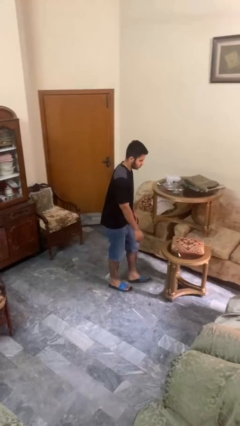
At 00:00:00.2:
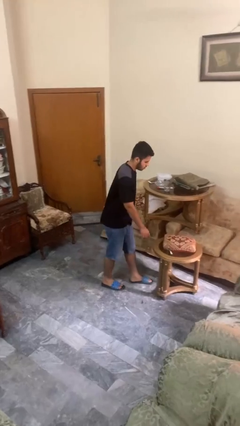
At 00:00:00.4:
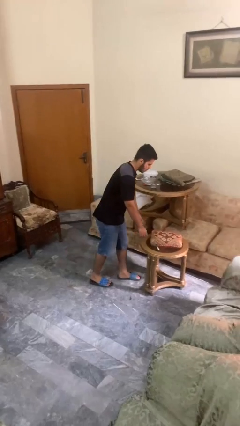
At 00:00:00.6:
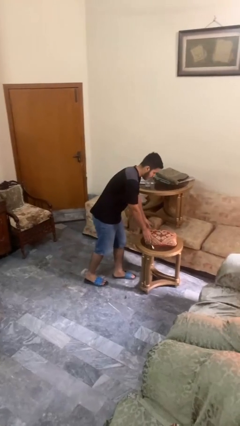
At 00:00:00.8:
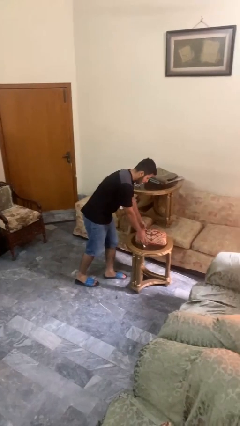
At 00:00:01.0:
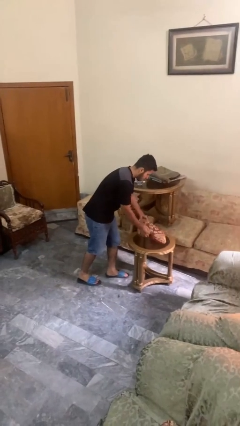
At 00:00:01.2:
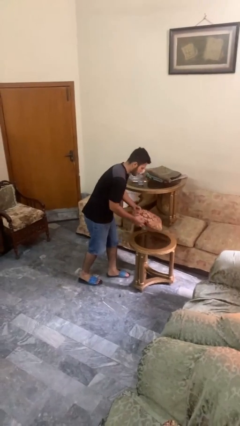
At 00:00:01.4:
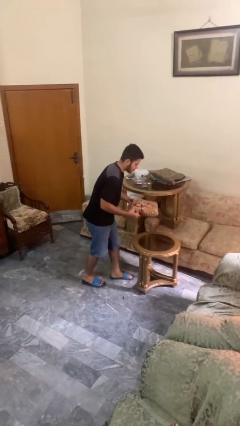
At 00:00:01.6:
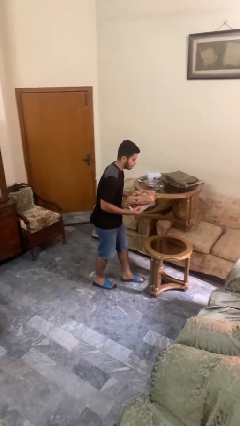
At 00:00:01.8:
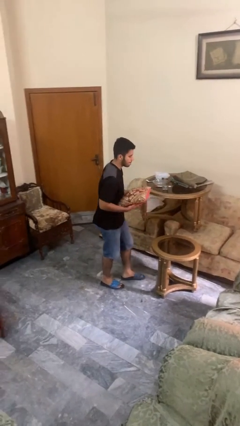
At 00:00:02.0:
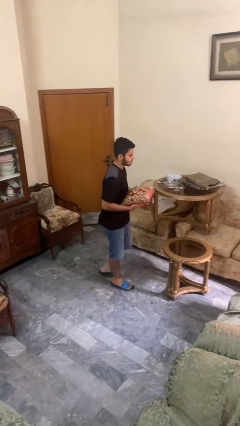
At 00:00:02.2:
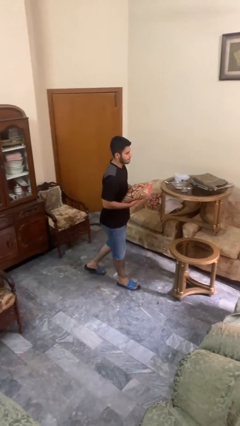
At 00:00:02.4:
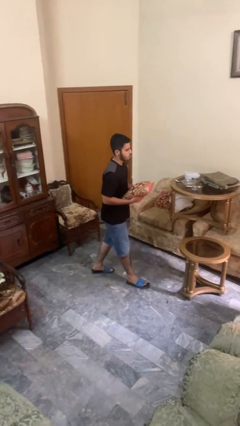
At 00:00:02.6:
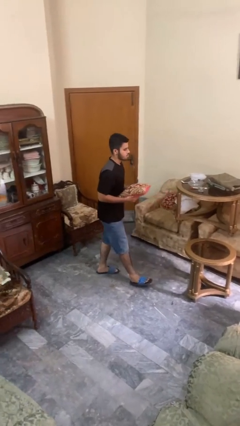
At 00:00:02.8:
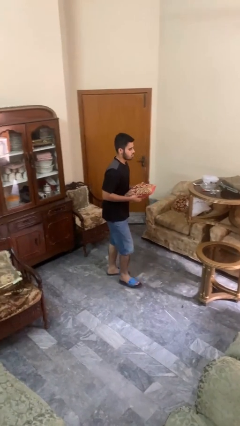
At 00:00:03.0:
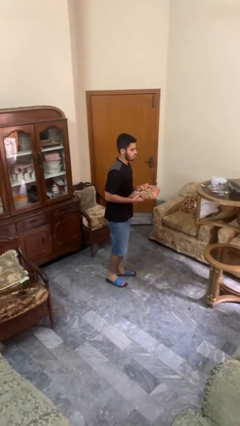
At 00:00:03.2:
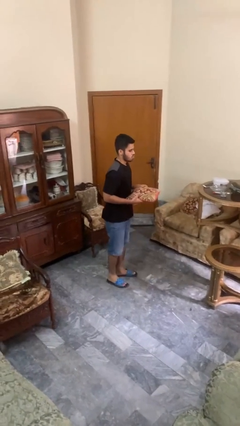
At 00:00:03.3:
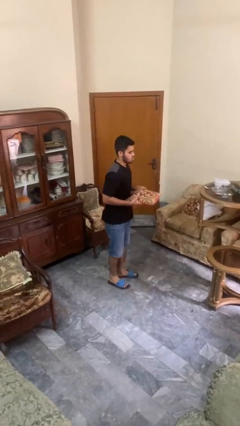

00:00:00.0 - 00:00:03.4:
person picks up object from table

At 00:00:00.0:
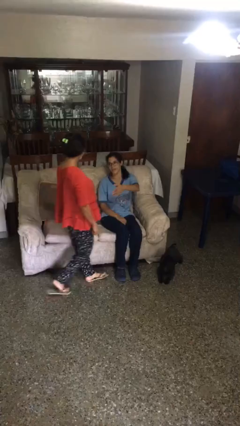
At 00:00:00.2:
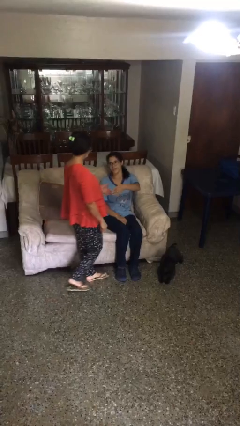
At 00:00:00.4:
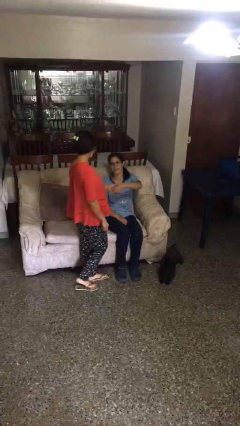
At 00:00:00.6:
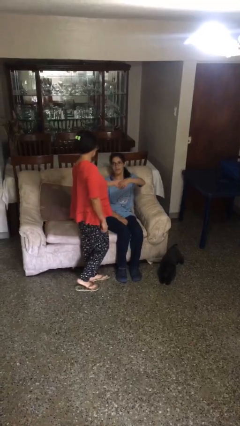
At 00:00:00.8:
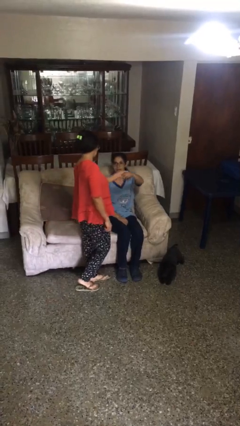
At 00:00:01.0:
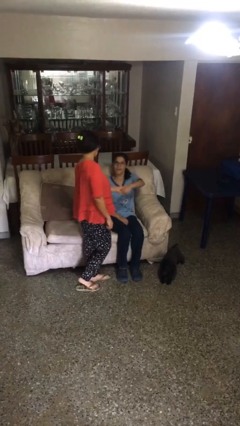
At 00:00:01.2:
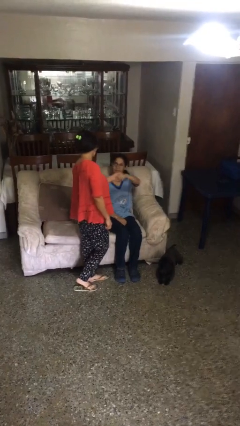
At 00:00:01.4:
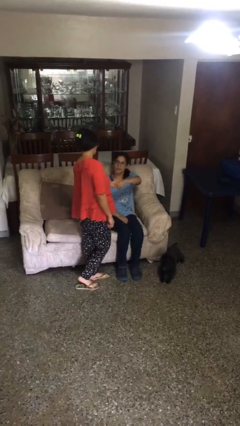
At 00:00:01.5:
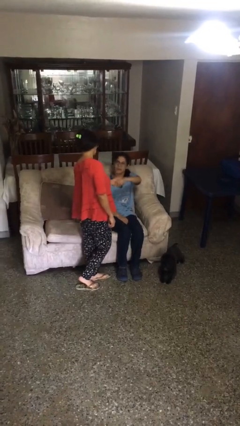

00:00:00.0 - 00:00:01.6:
person shakes hand

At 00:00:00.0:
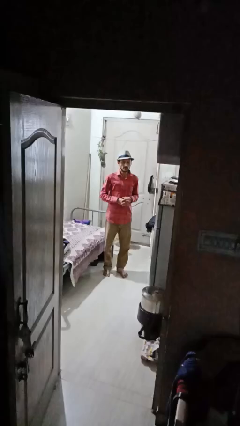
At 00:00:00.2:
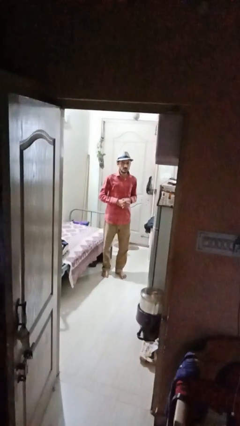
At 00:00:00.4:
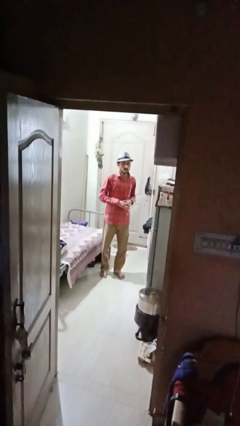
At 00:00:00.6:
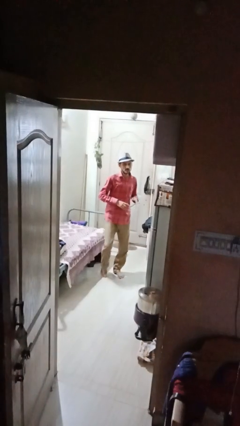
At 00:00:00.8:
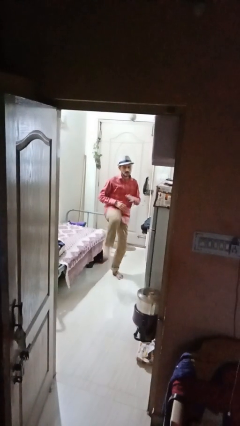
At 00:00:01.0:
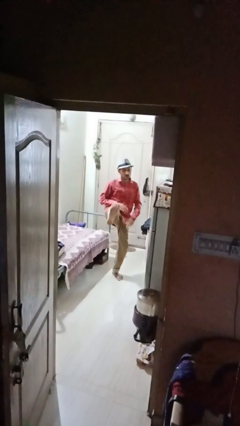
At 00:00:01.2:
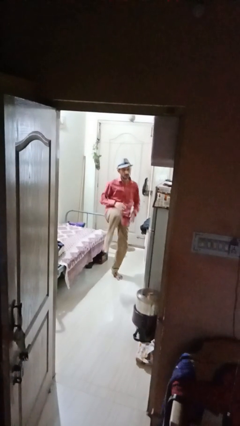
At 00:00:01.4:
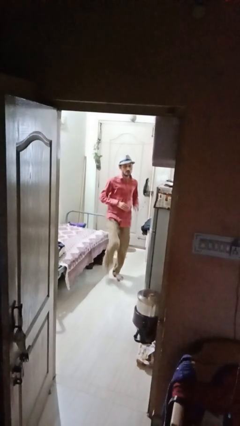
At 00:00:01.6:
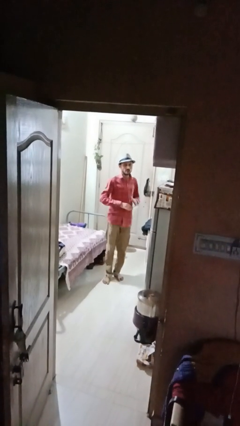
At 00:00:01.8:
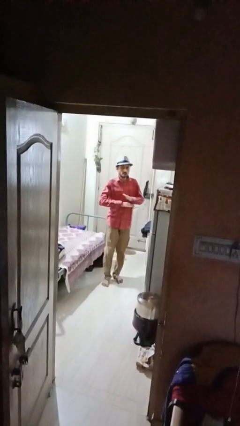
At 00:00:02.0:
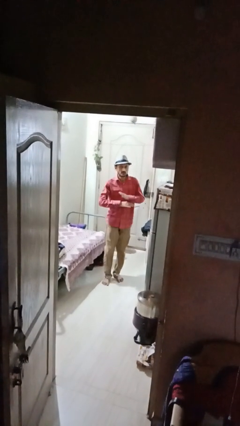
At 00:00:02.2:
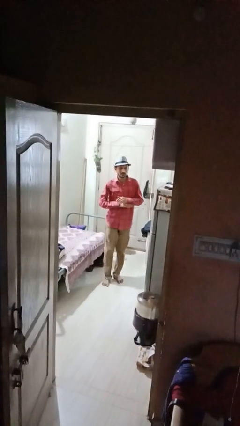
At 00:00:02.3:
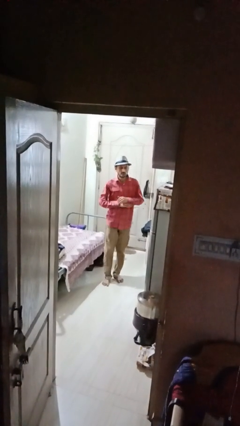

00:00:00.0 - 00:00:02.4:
person karate kicks

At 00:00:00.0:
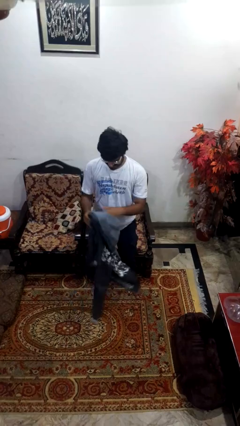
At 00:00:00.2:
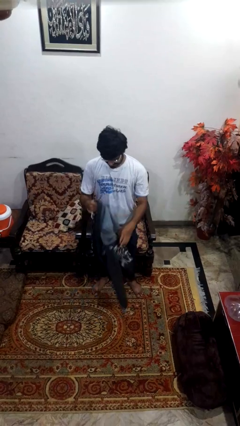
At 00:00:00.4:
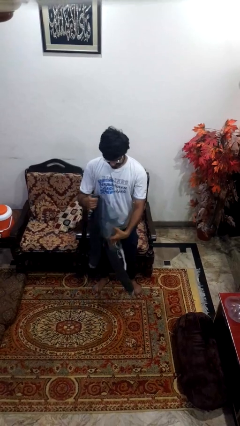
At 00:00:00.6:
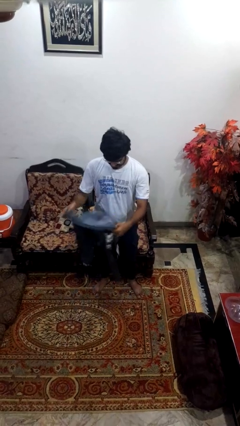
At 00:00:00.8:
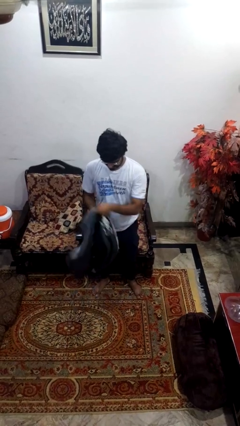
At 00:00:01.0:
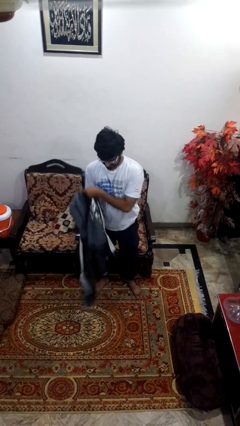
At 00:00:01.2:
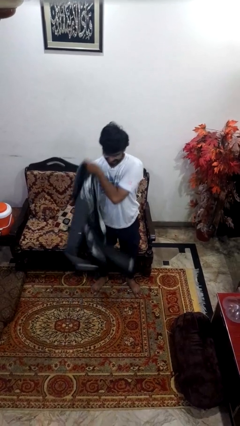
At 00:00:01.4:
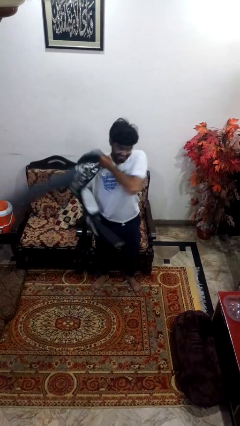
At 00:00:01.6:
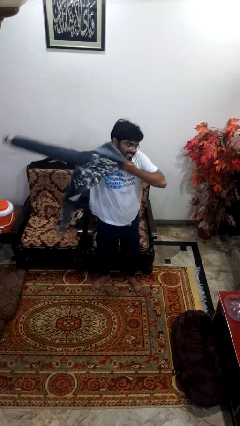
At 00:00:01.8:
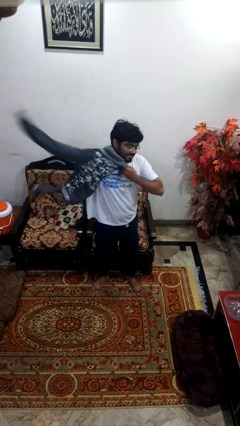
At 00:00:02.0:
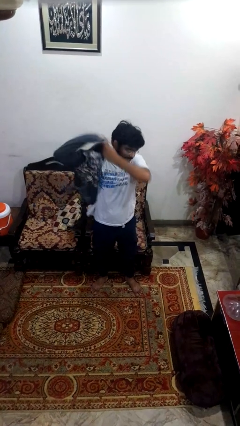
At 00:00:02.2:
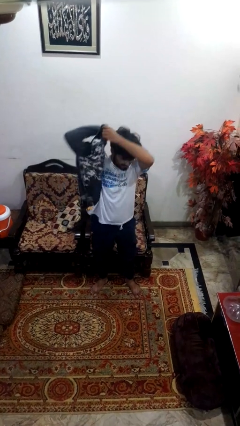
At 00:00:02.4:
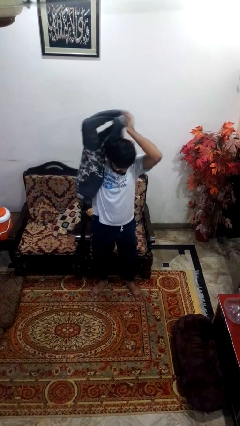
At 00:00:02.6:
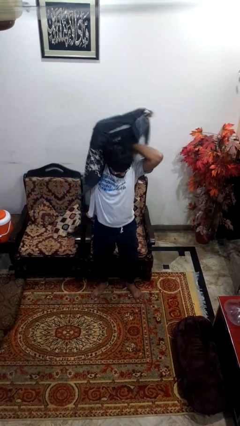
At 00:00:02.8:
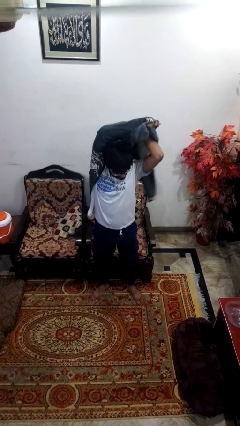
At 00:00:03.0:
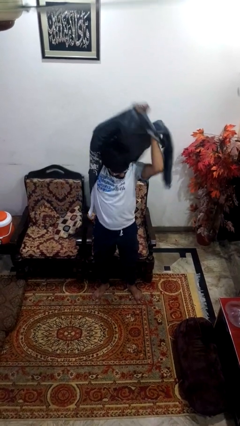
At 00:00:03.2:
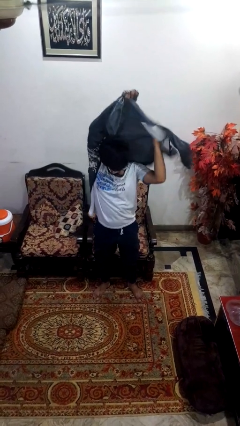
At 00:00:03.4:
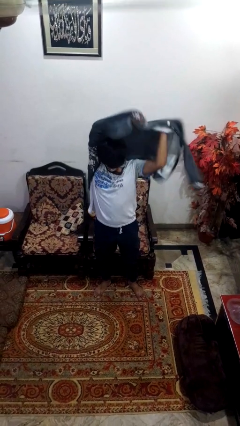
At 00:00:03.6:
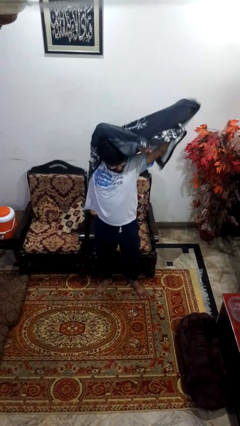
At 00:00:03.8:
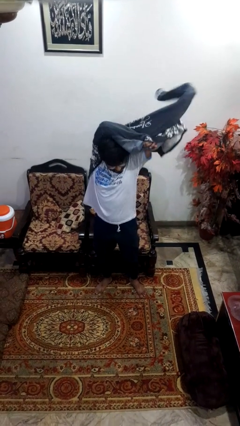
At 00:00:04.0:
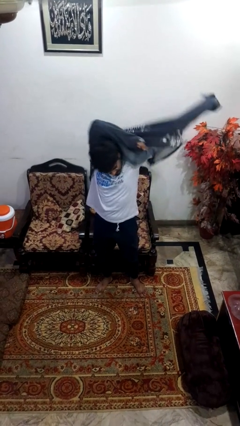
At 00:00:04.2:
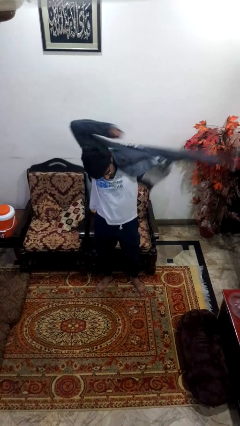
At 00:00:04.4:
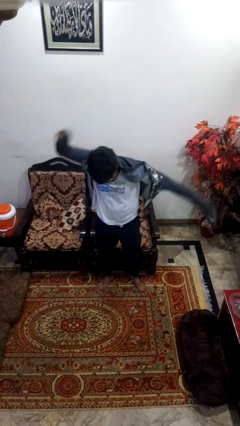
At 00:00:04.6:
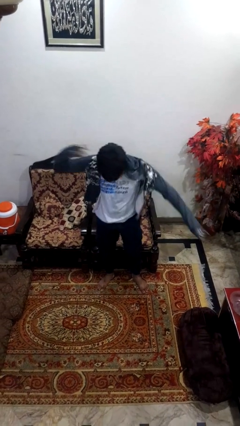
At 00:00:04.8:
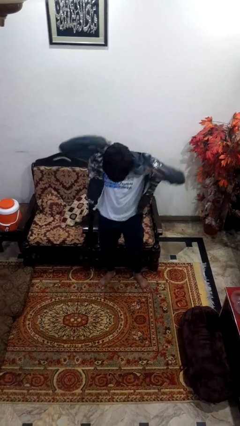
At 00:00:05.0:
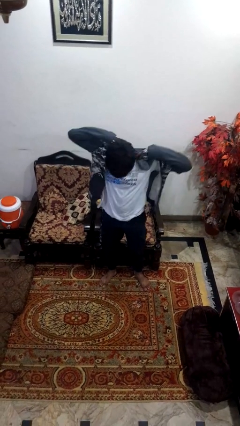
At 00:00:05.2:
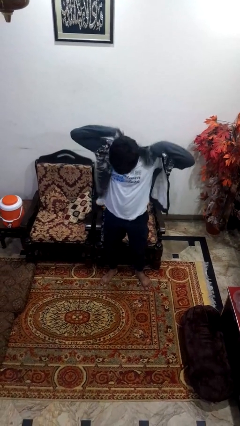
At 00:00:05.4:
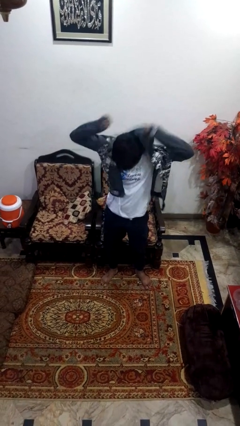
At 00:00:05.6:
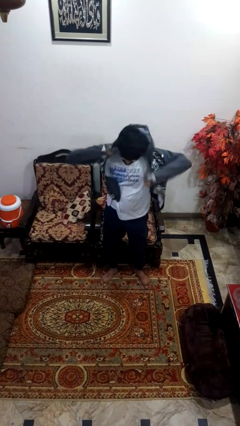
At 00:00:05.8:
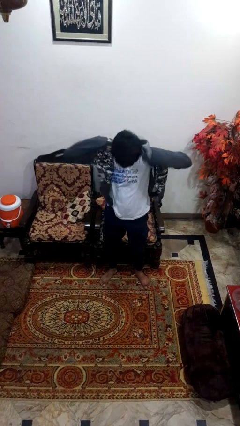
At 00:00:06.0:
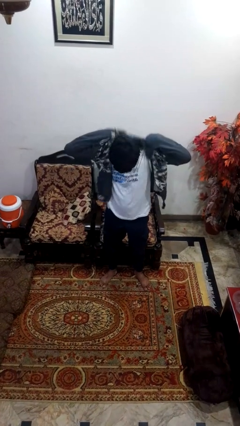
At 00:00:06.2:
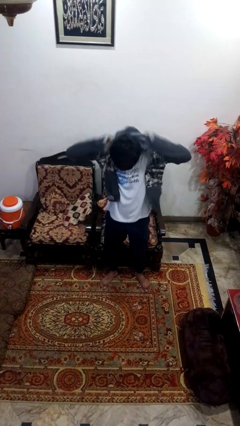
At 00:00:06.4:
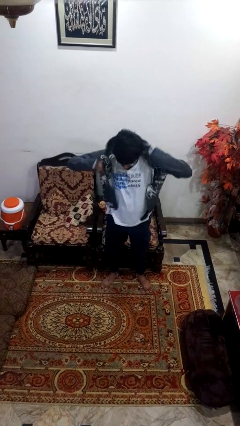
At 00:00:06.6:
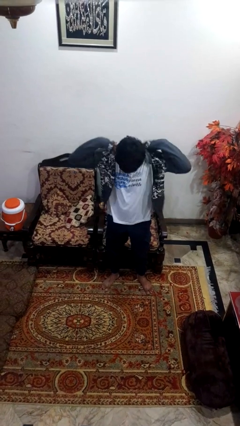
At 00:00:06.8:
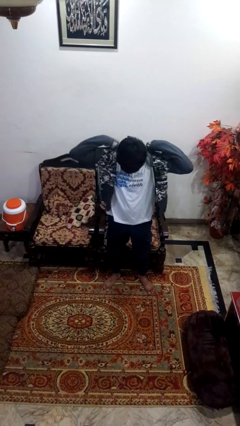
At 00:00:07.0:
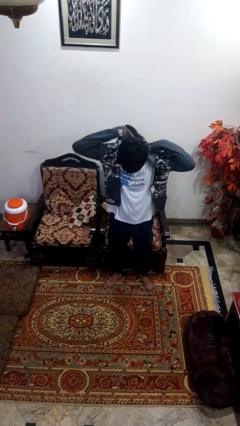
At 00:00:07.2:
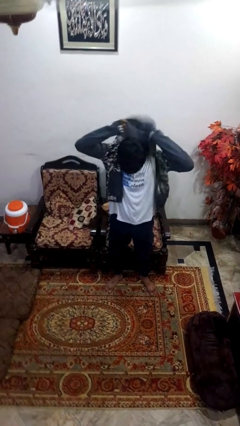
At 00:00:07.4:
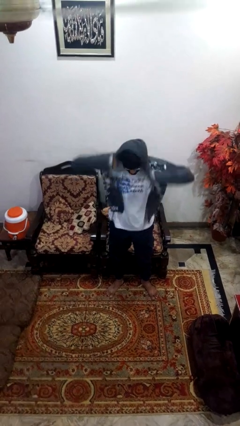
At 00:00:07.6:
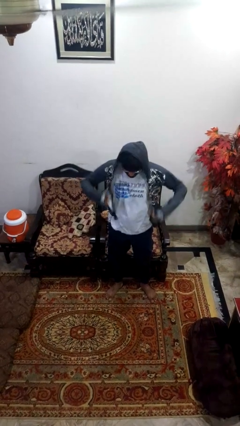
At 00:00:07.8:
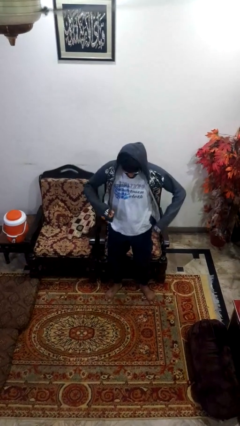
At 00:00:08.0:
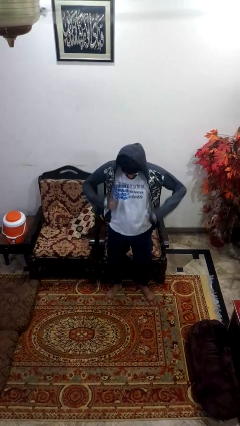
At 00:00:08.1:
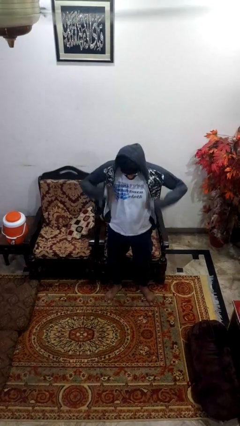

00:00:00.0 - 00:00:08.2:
person puts on hoodie

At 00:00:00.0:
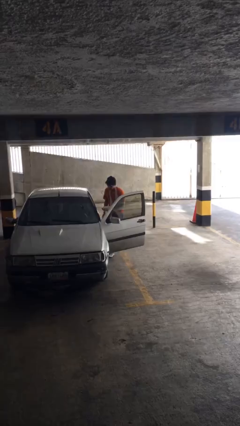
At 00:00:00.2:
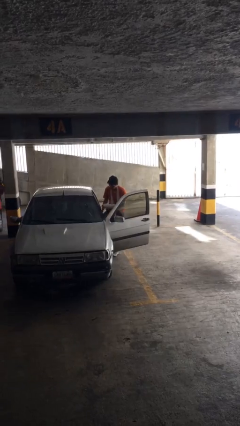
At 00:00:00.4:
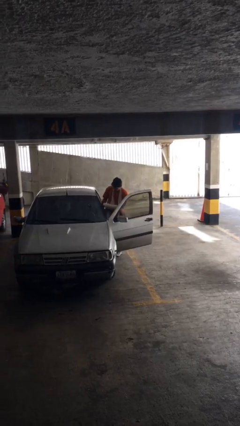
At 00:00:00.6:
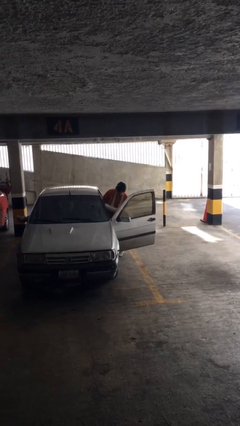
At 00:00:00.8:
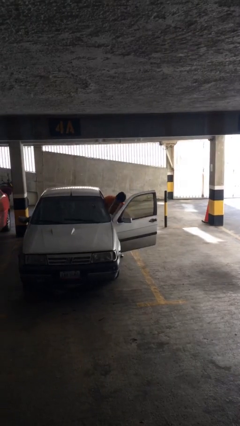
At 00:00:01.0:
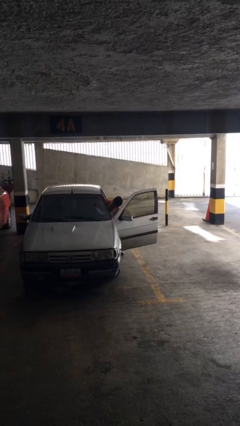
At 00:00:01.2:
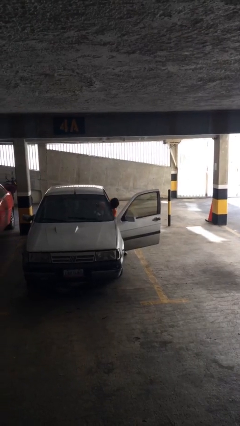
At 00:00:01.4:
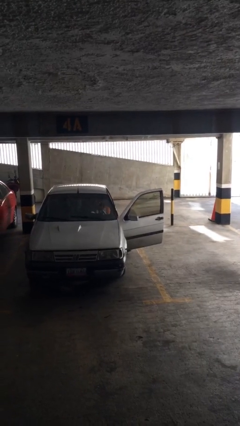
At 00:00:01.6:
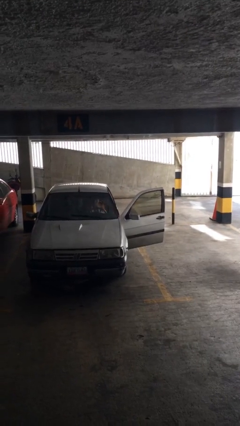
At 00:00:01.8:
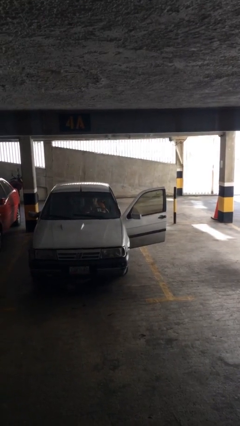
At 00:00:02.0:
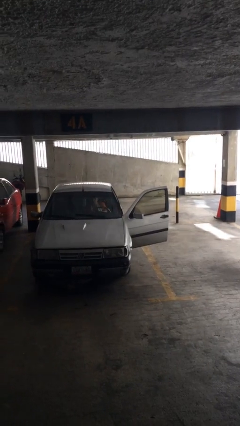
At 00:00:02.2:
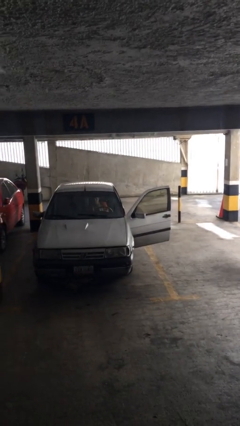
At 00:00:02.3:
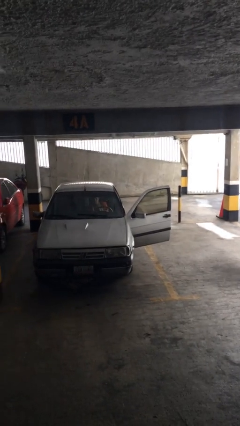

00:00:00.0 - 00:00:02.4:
person enters car
